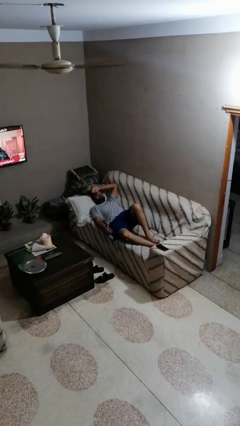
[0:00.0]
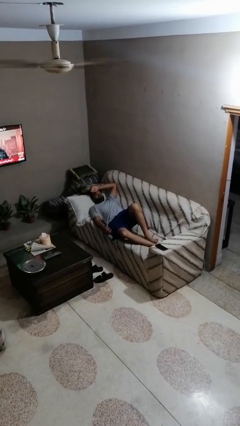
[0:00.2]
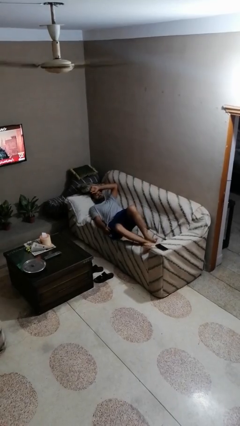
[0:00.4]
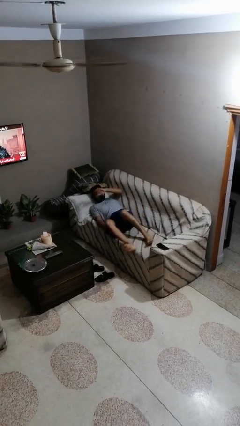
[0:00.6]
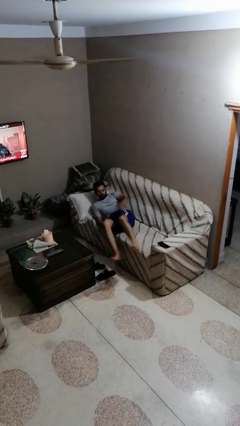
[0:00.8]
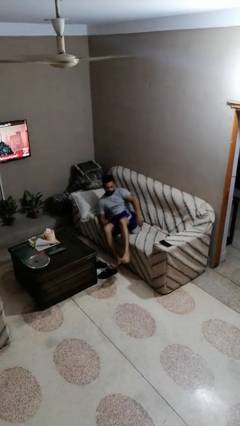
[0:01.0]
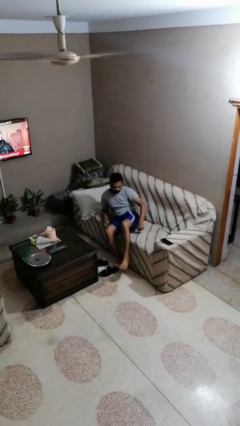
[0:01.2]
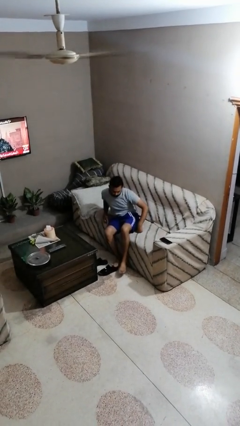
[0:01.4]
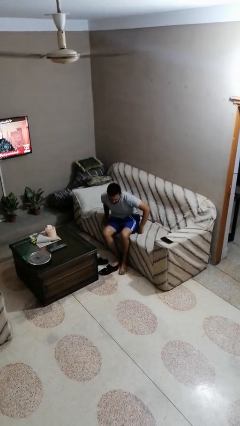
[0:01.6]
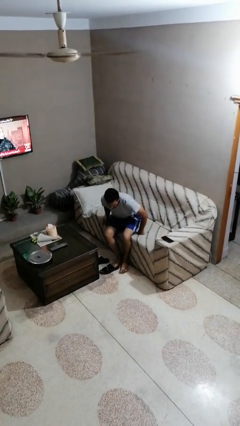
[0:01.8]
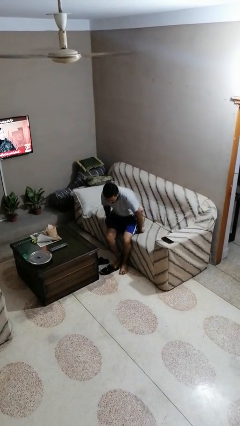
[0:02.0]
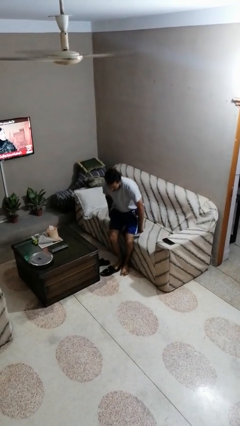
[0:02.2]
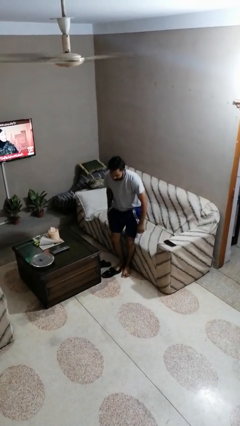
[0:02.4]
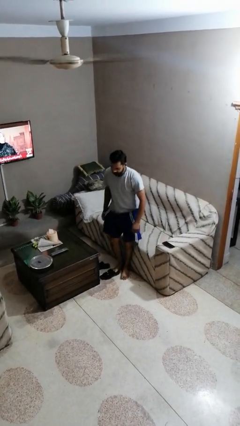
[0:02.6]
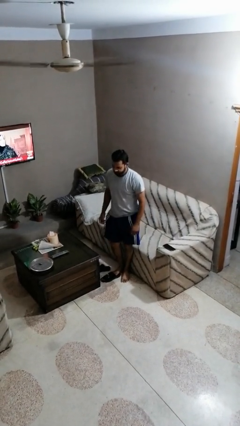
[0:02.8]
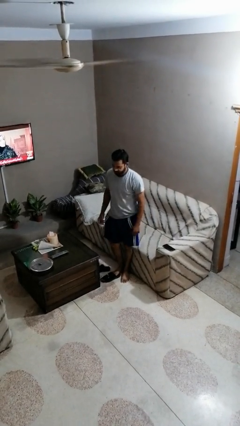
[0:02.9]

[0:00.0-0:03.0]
person stands up

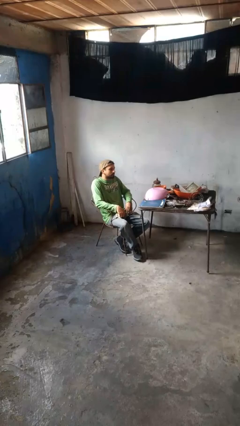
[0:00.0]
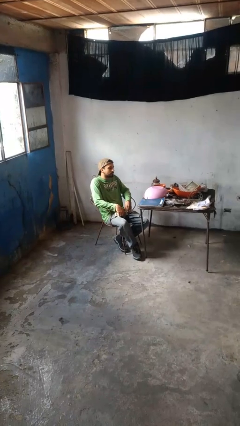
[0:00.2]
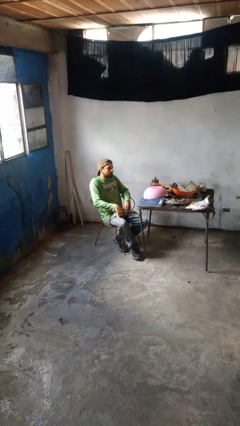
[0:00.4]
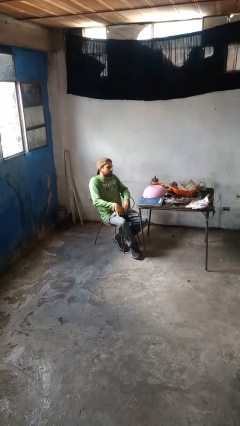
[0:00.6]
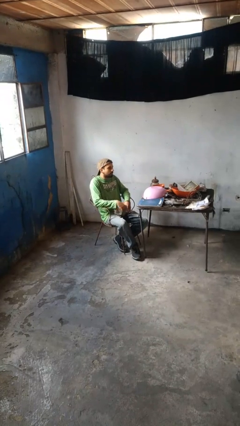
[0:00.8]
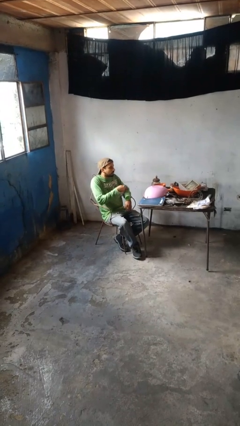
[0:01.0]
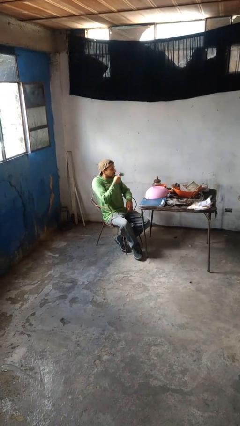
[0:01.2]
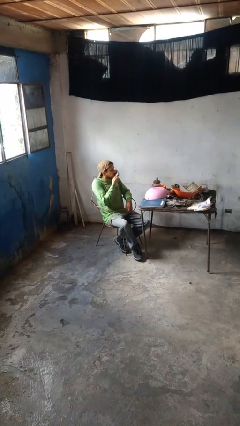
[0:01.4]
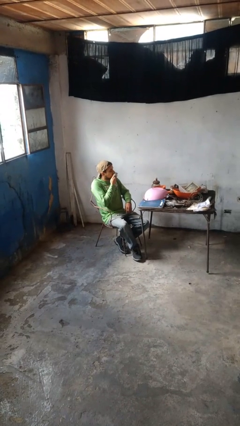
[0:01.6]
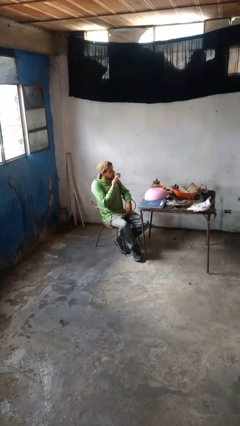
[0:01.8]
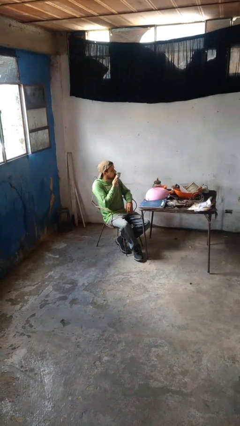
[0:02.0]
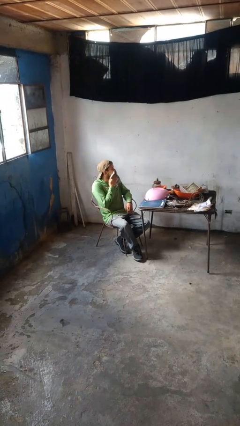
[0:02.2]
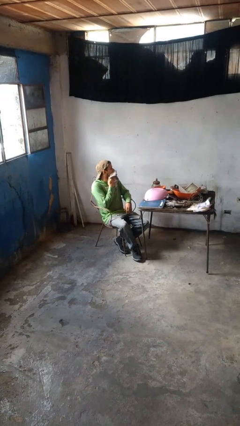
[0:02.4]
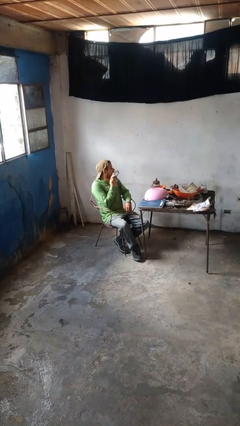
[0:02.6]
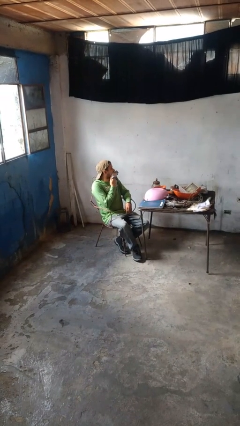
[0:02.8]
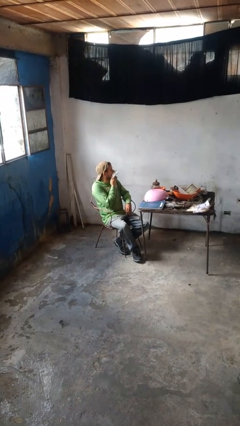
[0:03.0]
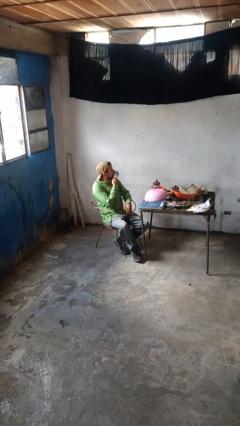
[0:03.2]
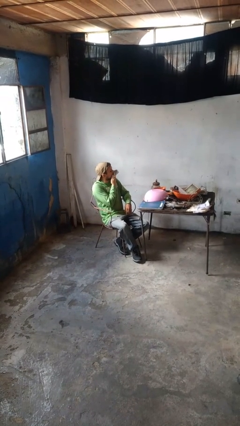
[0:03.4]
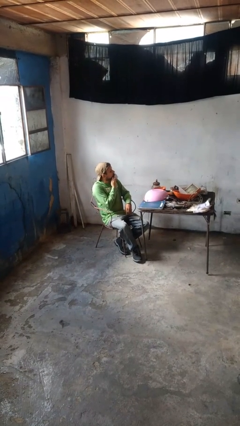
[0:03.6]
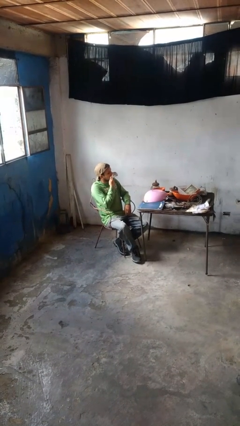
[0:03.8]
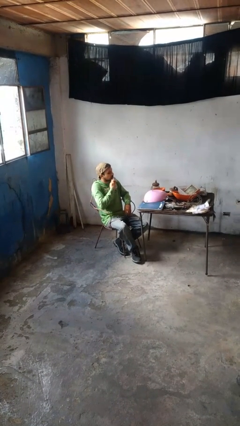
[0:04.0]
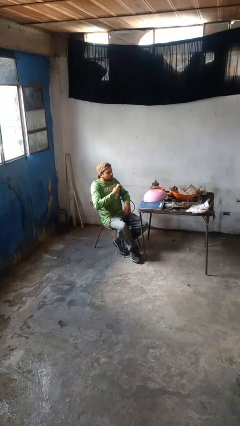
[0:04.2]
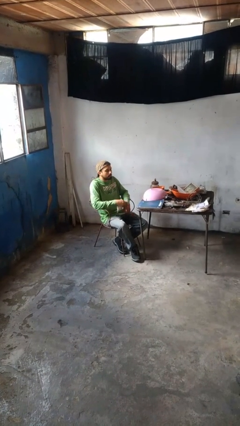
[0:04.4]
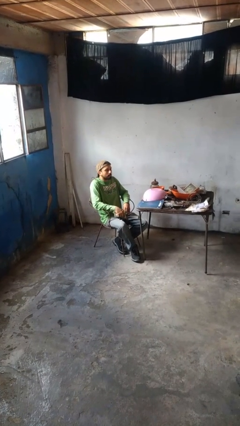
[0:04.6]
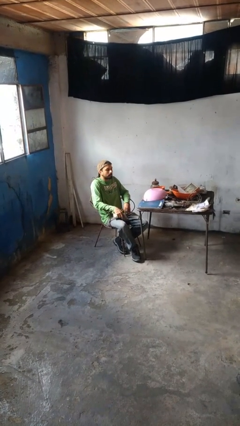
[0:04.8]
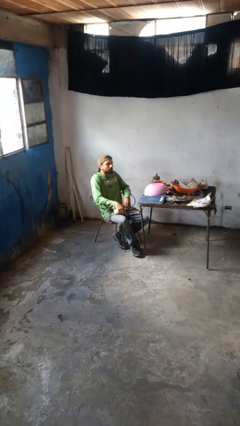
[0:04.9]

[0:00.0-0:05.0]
person wipes mouth with napkin

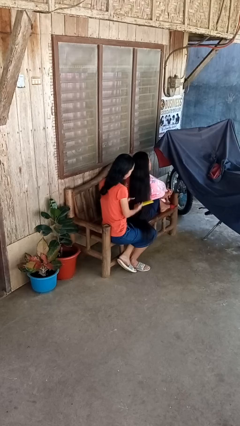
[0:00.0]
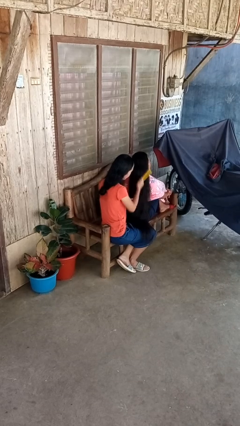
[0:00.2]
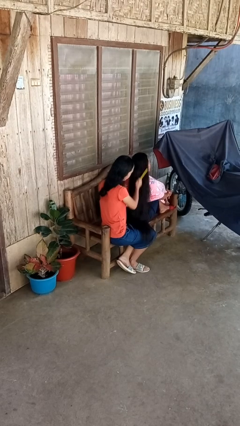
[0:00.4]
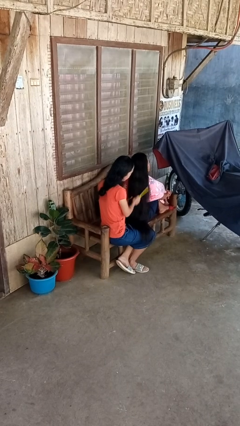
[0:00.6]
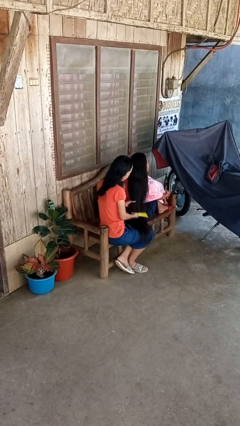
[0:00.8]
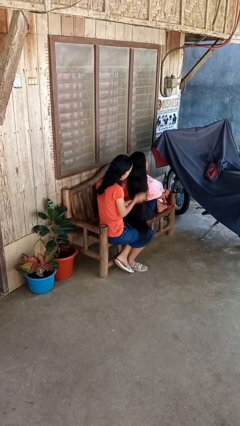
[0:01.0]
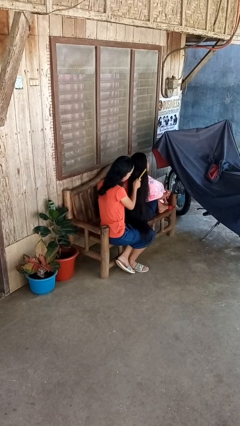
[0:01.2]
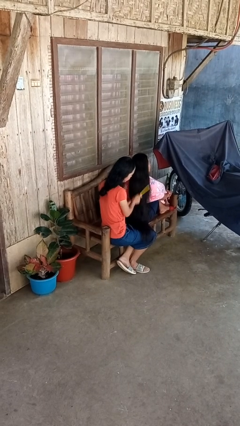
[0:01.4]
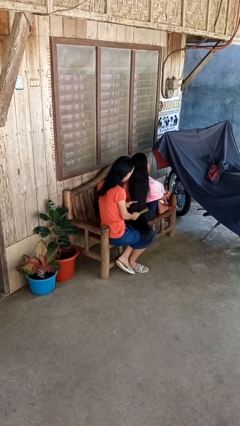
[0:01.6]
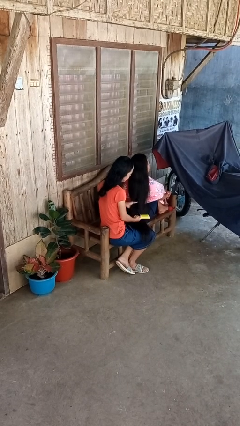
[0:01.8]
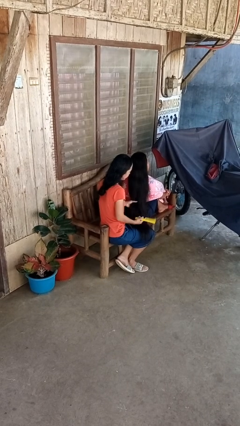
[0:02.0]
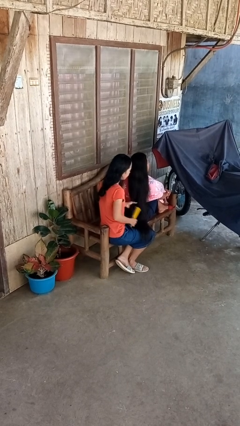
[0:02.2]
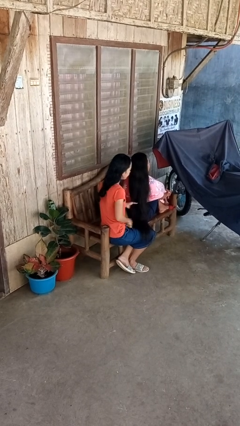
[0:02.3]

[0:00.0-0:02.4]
person brushes hair of person

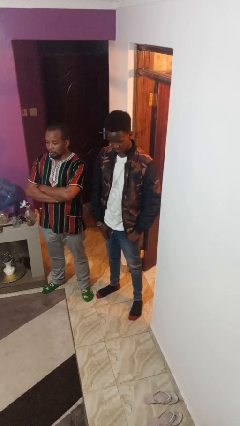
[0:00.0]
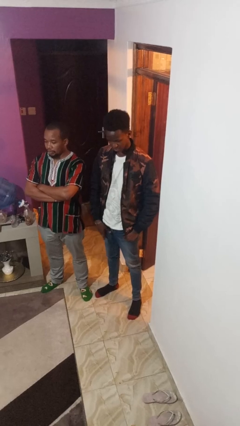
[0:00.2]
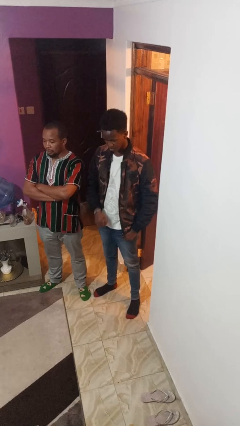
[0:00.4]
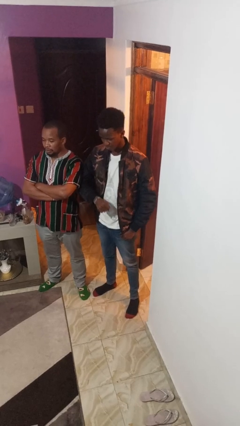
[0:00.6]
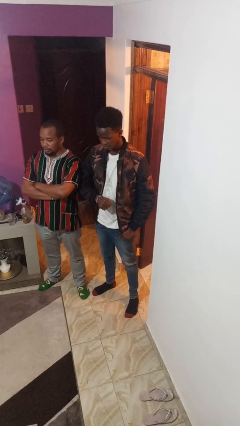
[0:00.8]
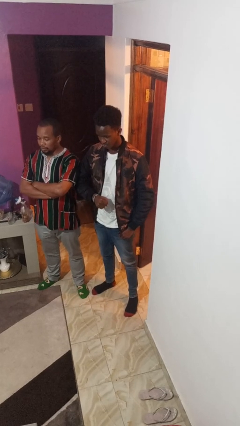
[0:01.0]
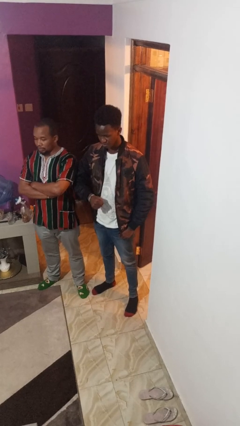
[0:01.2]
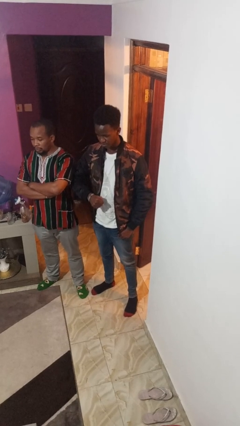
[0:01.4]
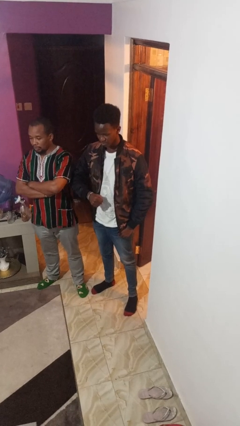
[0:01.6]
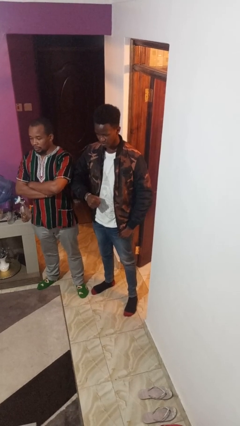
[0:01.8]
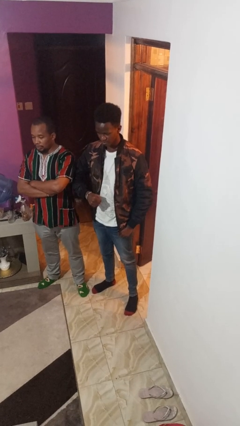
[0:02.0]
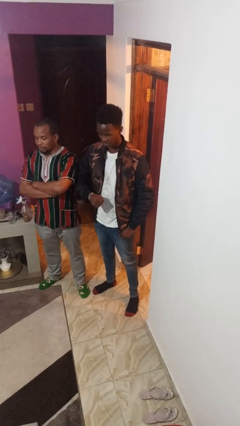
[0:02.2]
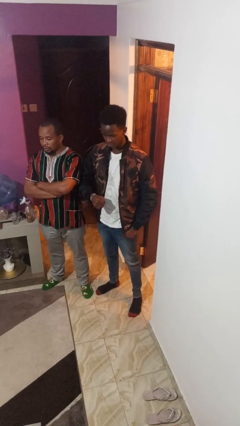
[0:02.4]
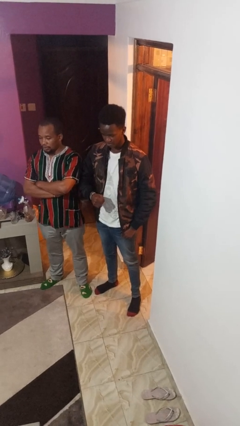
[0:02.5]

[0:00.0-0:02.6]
person nudges person with elbow

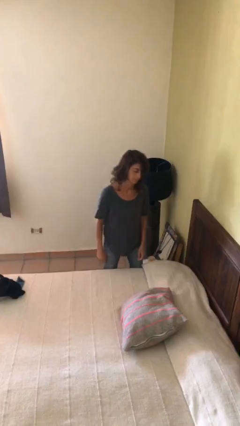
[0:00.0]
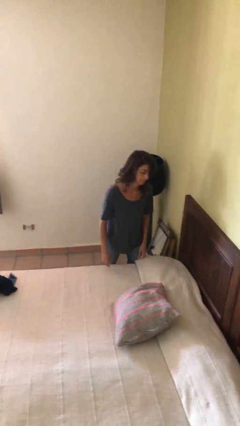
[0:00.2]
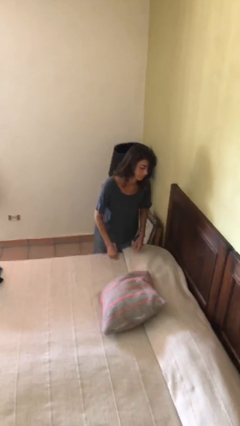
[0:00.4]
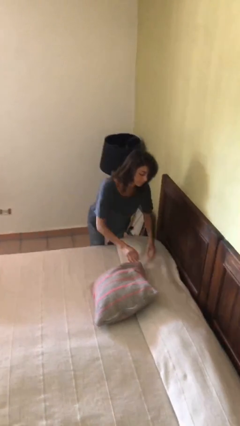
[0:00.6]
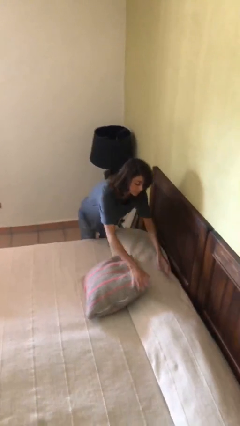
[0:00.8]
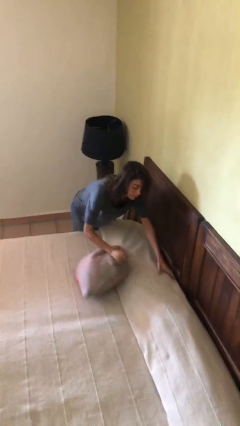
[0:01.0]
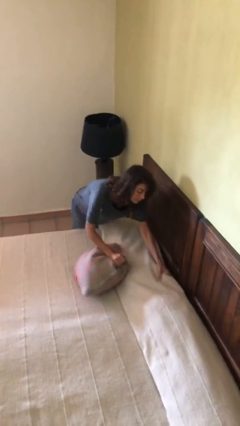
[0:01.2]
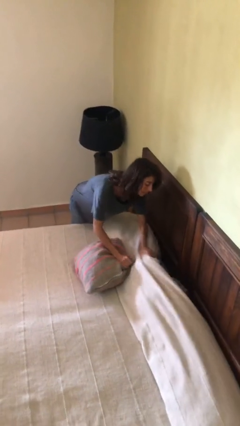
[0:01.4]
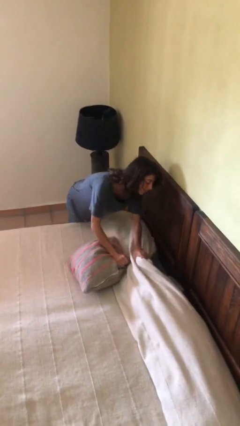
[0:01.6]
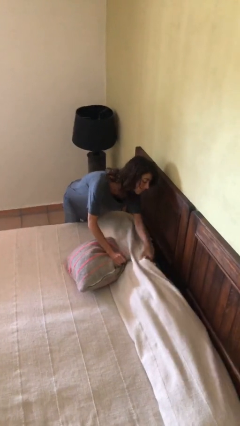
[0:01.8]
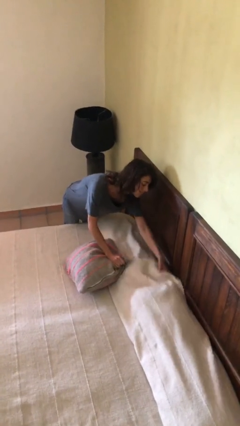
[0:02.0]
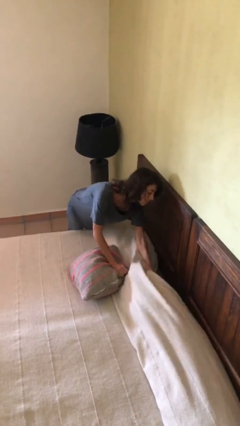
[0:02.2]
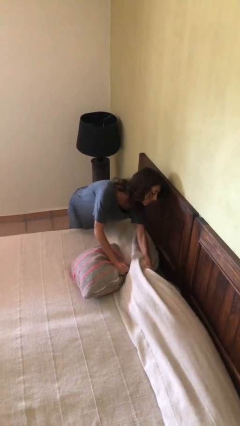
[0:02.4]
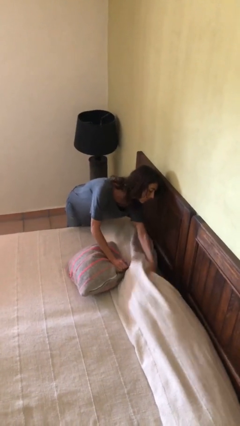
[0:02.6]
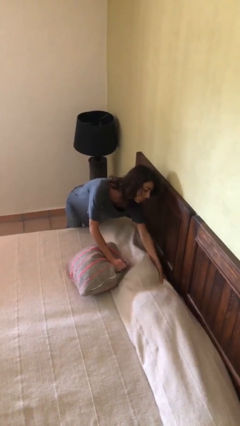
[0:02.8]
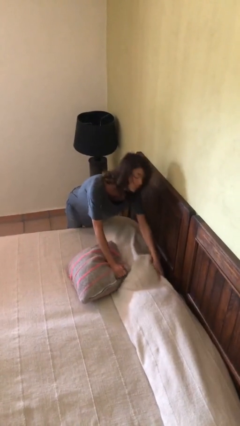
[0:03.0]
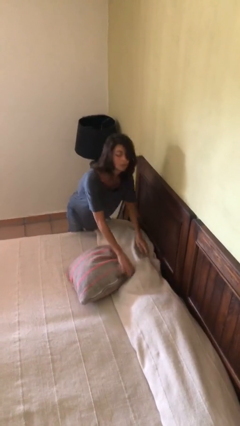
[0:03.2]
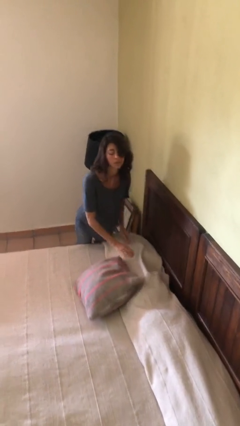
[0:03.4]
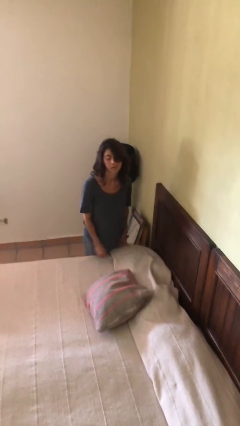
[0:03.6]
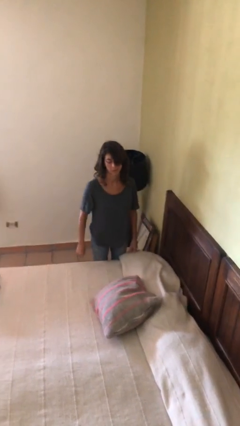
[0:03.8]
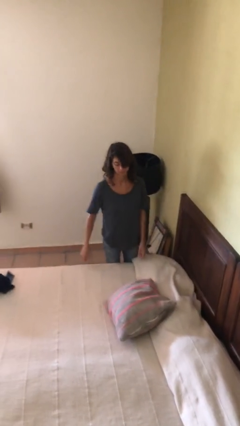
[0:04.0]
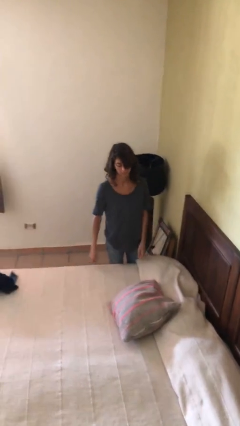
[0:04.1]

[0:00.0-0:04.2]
person searches in couch

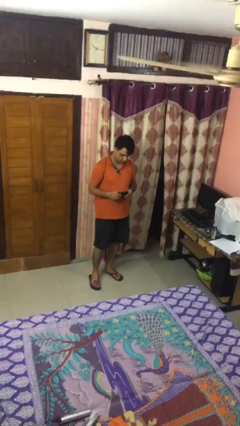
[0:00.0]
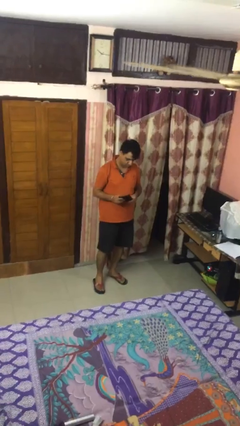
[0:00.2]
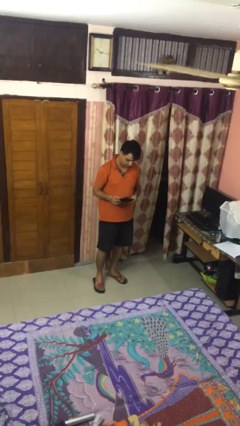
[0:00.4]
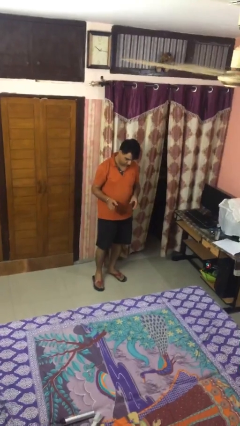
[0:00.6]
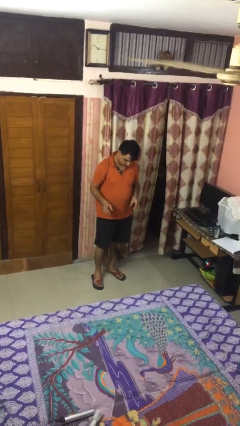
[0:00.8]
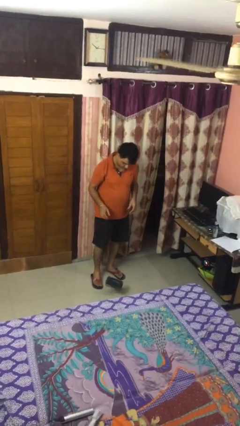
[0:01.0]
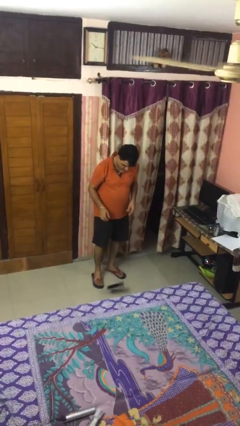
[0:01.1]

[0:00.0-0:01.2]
person drops object
